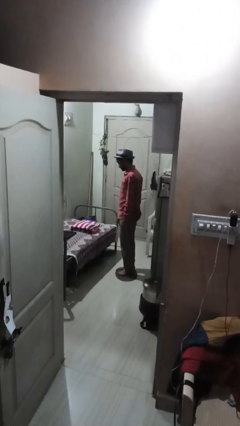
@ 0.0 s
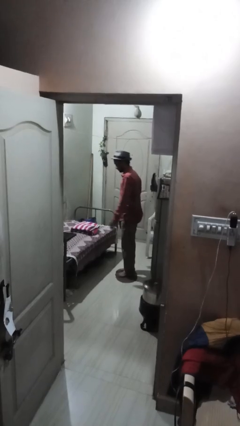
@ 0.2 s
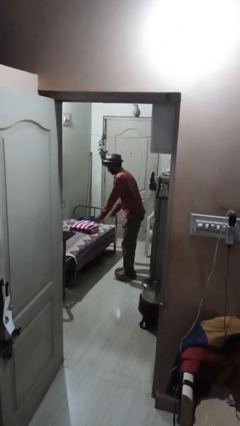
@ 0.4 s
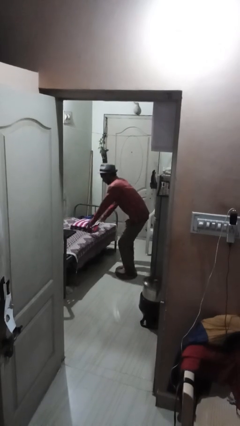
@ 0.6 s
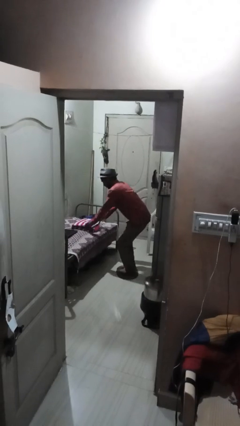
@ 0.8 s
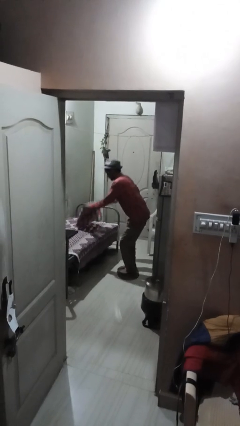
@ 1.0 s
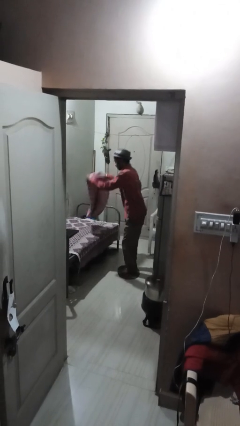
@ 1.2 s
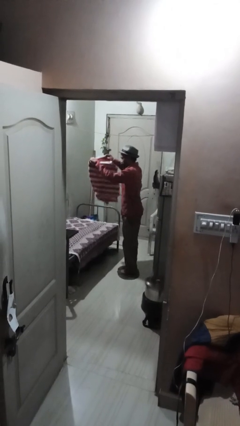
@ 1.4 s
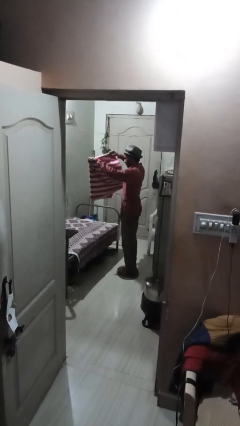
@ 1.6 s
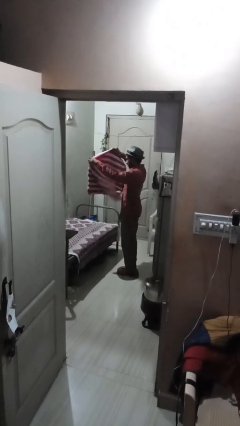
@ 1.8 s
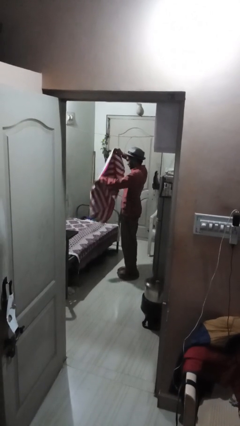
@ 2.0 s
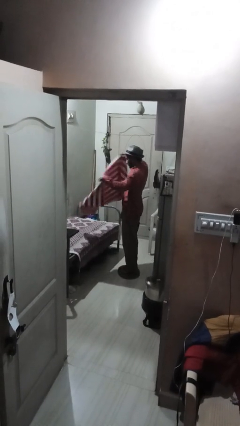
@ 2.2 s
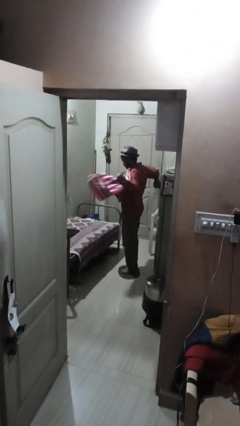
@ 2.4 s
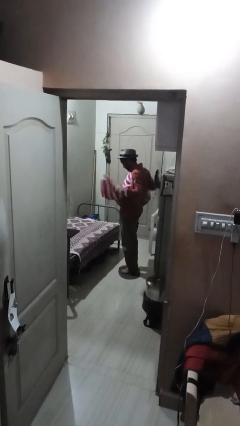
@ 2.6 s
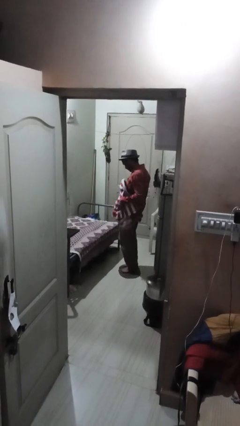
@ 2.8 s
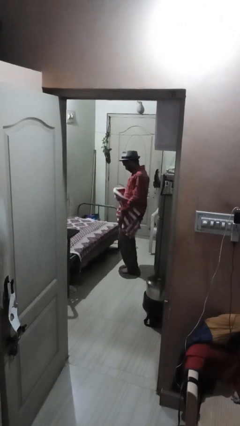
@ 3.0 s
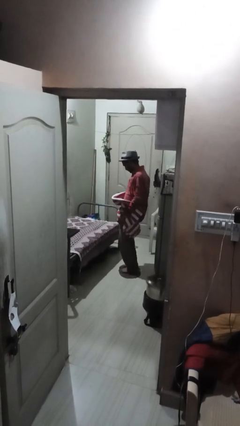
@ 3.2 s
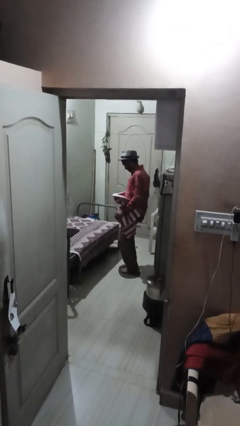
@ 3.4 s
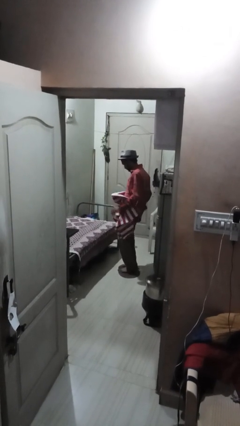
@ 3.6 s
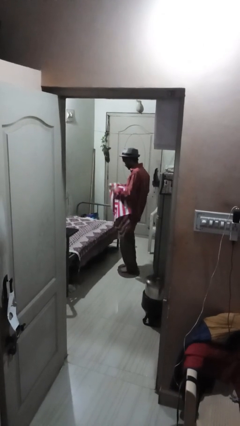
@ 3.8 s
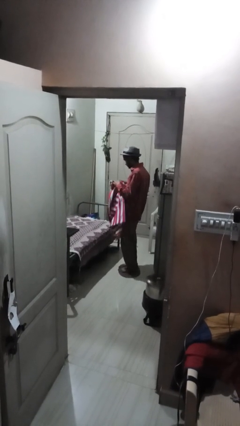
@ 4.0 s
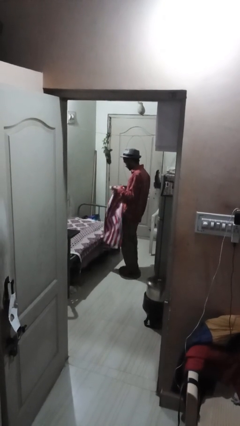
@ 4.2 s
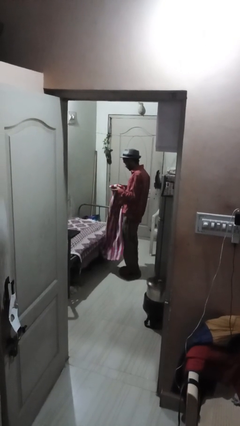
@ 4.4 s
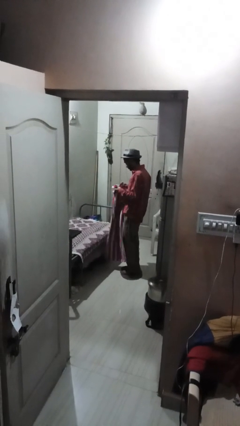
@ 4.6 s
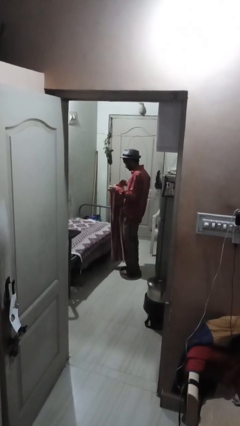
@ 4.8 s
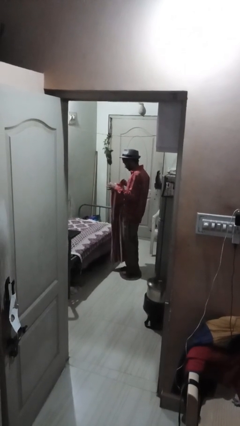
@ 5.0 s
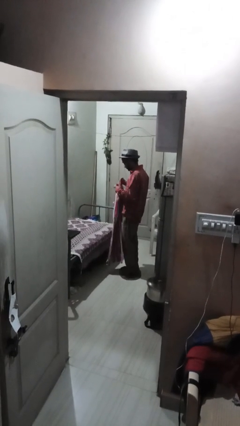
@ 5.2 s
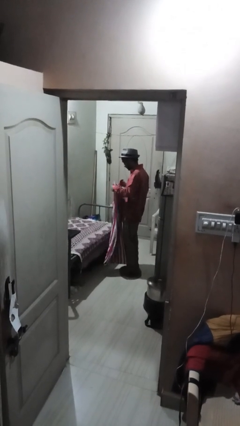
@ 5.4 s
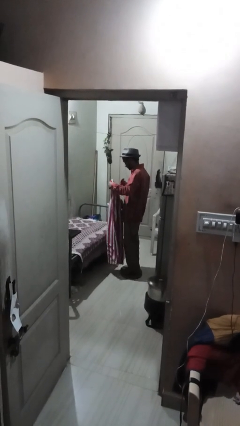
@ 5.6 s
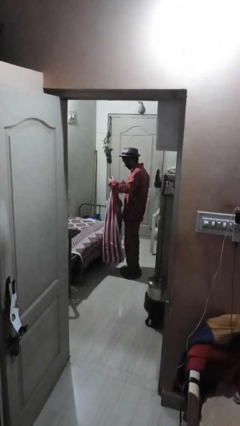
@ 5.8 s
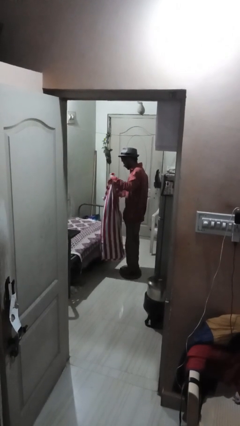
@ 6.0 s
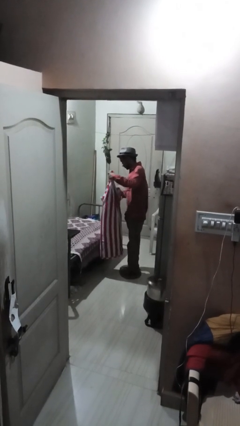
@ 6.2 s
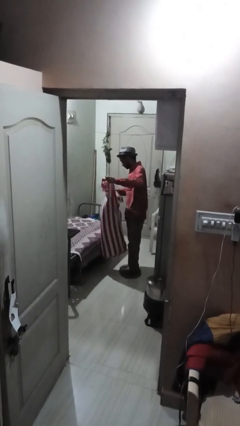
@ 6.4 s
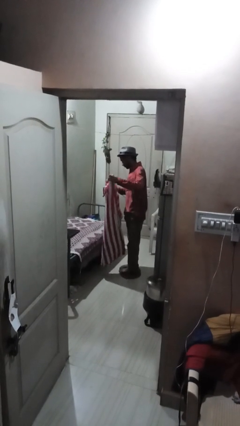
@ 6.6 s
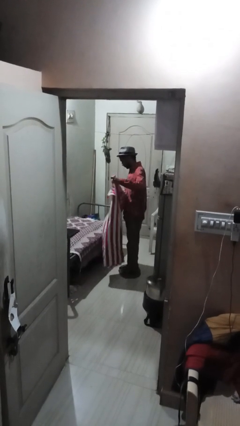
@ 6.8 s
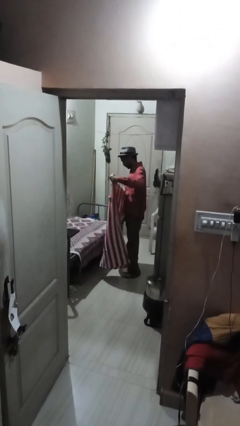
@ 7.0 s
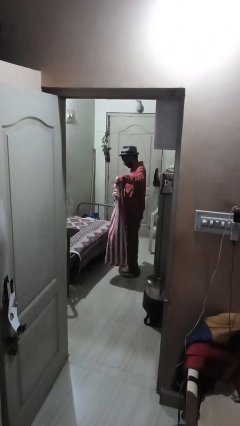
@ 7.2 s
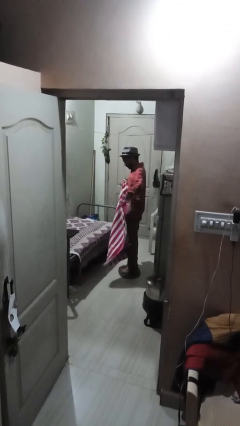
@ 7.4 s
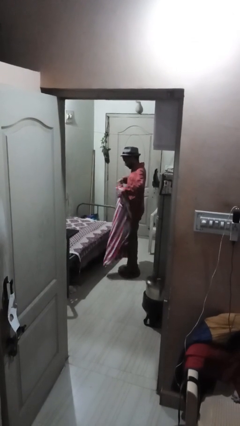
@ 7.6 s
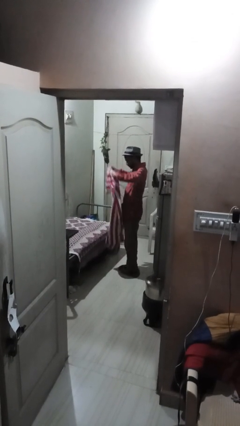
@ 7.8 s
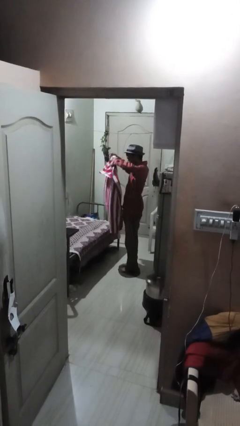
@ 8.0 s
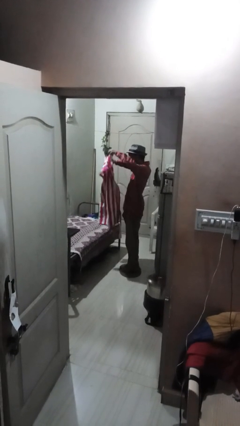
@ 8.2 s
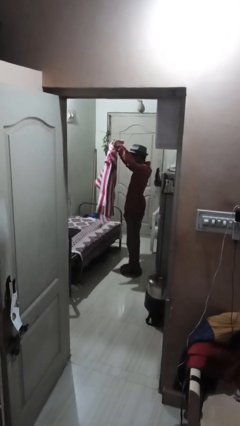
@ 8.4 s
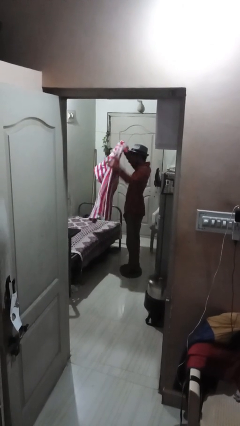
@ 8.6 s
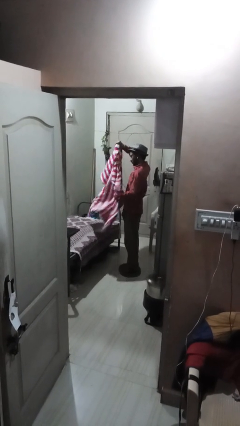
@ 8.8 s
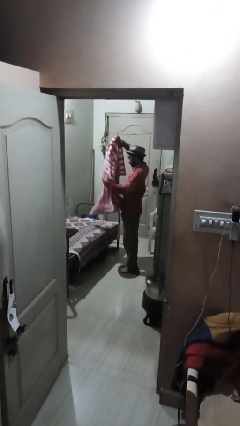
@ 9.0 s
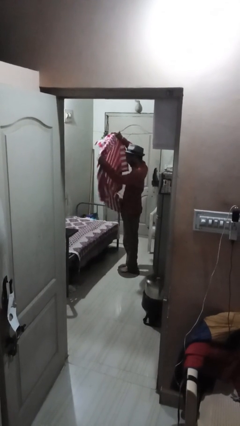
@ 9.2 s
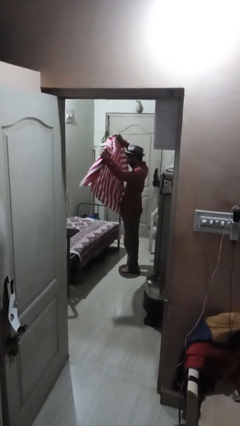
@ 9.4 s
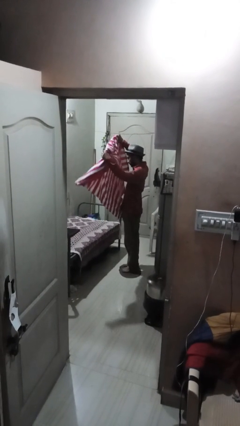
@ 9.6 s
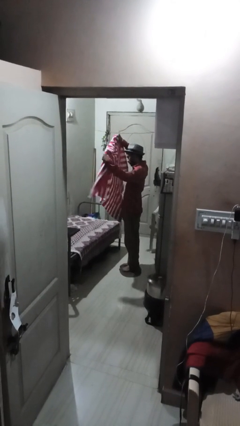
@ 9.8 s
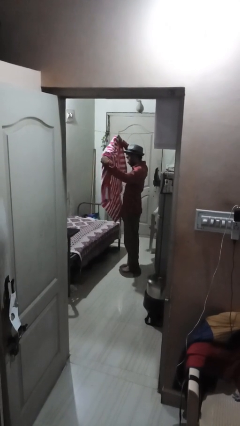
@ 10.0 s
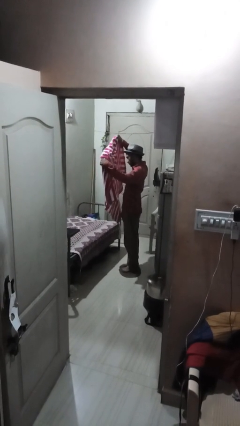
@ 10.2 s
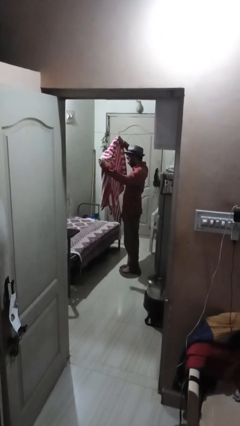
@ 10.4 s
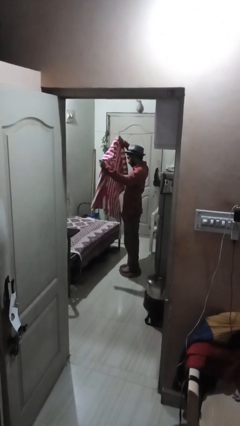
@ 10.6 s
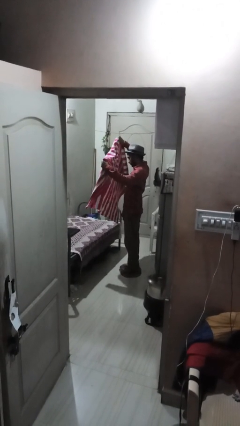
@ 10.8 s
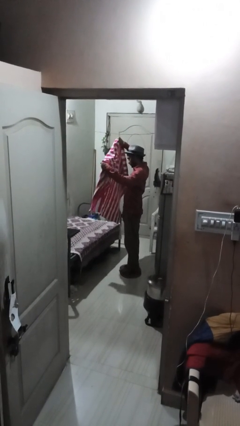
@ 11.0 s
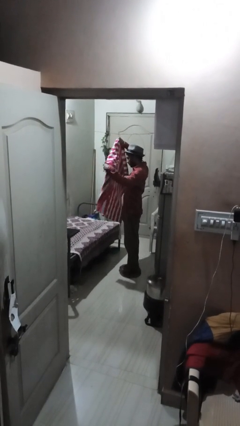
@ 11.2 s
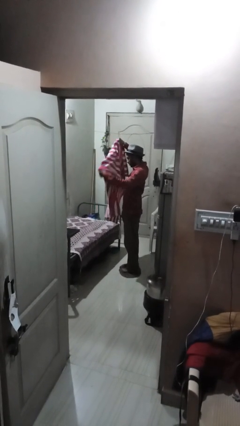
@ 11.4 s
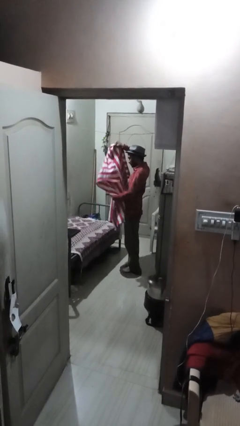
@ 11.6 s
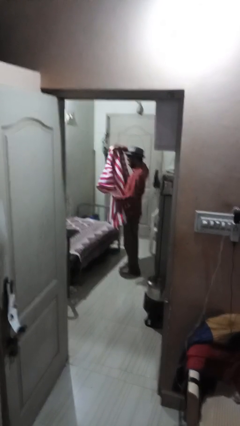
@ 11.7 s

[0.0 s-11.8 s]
person unfolds blanket

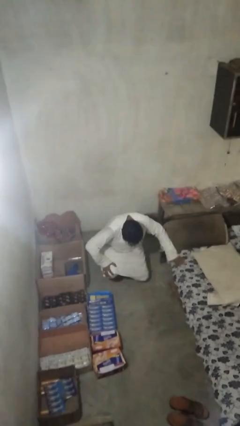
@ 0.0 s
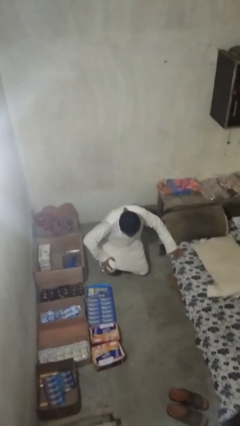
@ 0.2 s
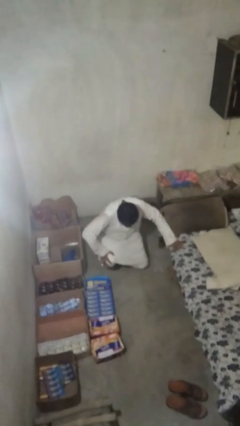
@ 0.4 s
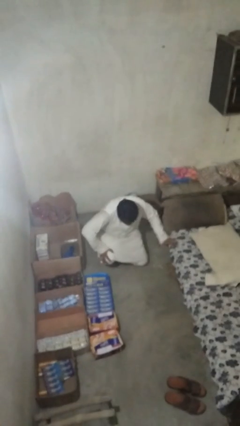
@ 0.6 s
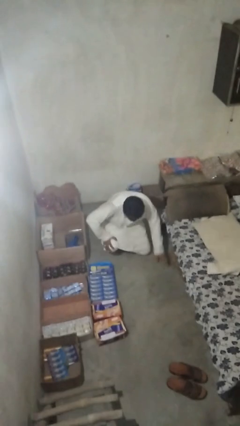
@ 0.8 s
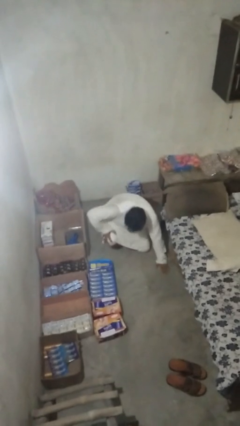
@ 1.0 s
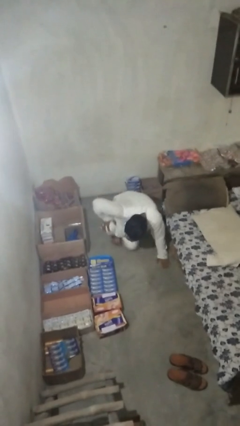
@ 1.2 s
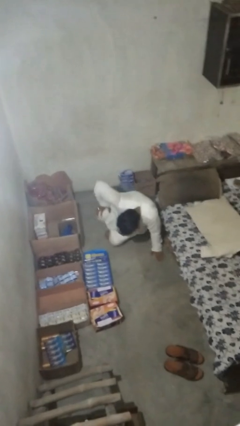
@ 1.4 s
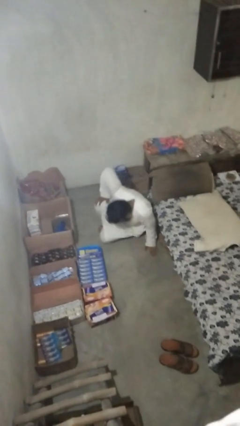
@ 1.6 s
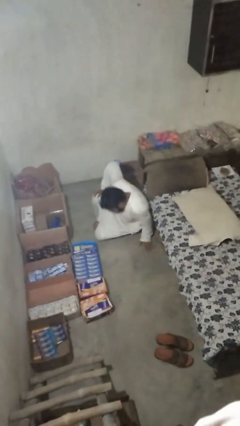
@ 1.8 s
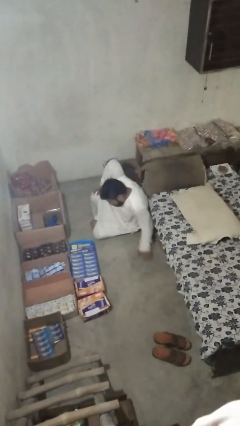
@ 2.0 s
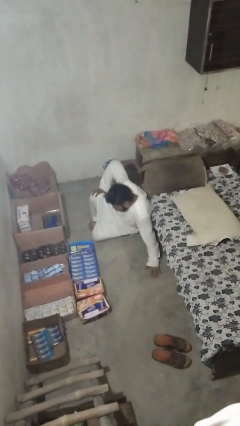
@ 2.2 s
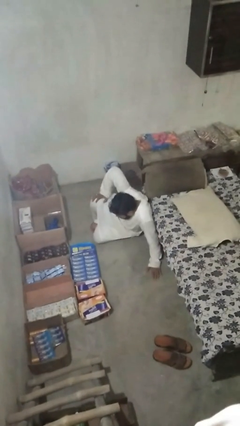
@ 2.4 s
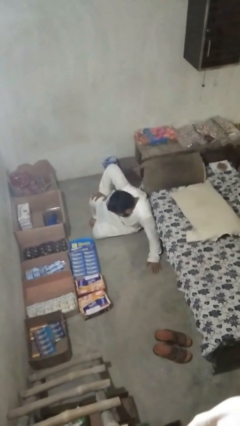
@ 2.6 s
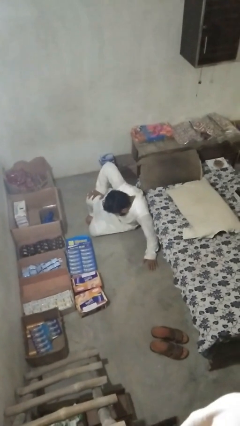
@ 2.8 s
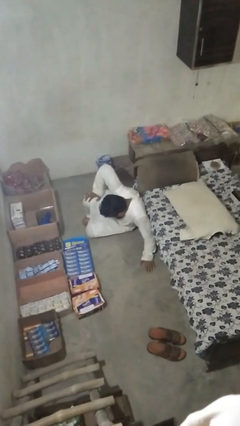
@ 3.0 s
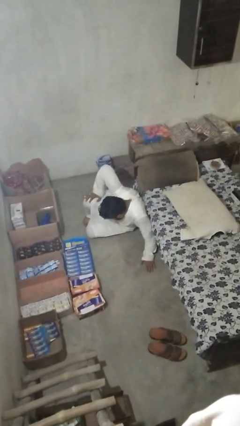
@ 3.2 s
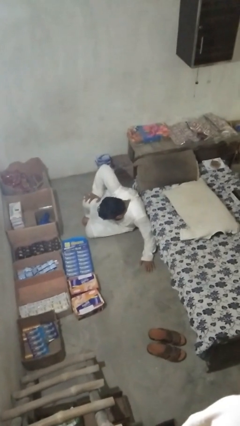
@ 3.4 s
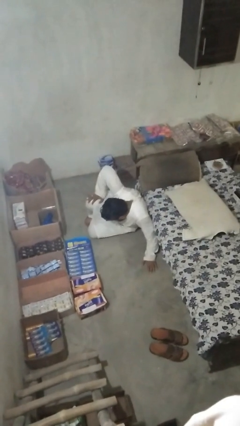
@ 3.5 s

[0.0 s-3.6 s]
person lies down on floor

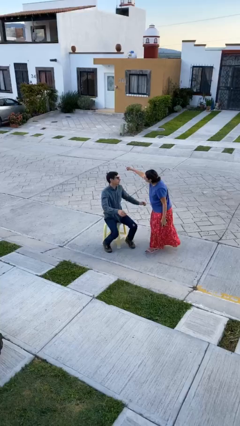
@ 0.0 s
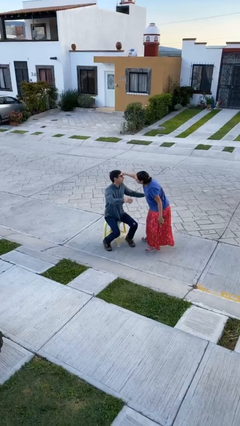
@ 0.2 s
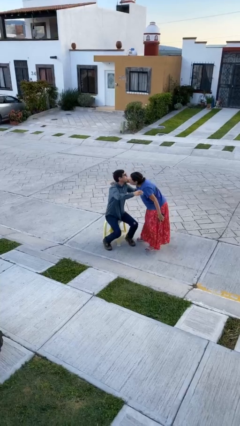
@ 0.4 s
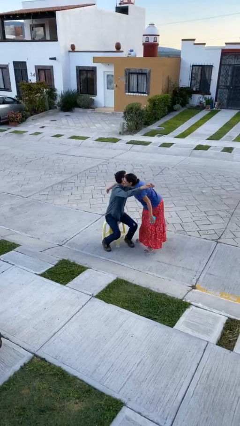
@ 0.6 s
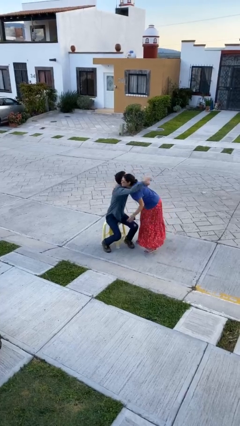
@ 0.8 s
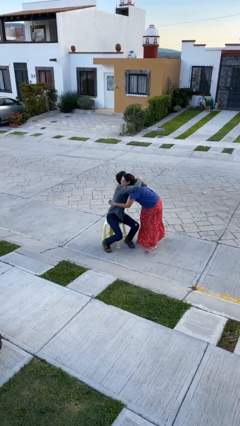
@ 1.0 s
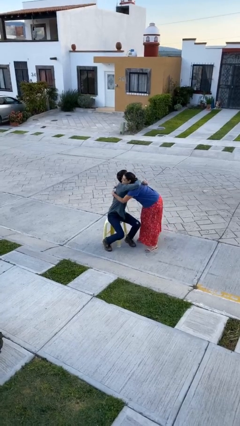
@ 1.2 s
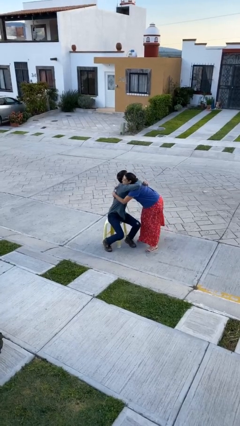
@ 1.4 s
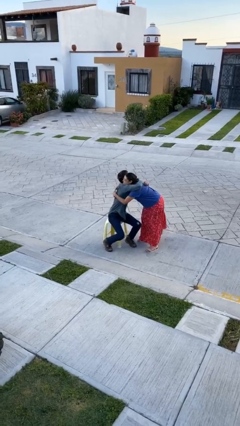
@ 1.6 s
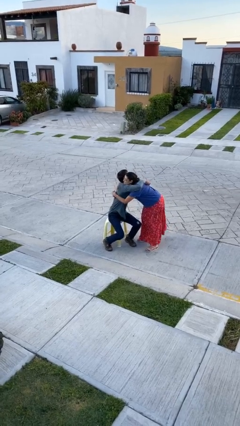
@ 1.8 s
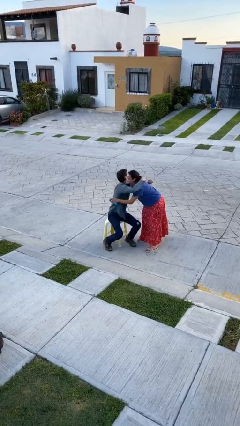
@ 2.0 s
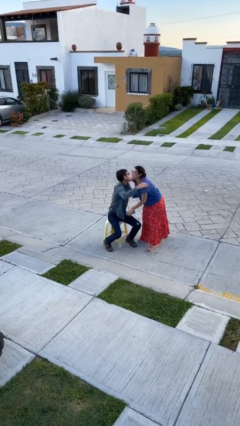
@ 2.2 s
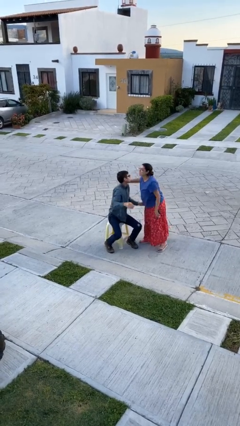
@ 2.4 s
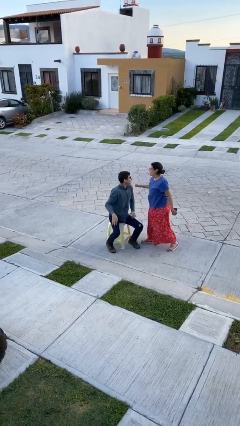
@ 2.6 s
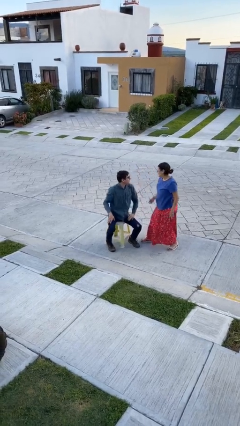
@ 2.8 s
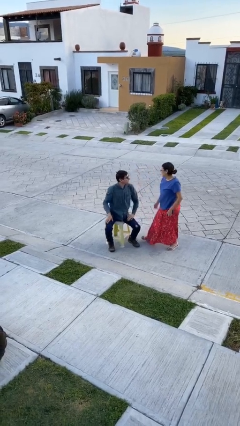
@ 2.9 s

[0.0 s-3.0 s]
person embraces person
